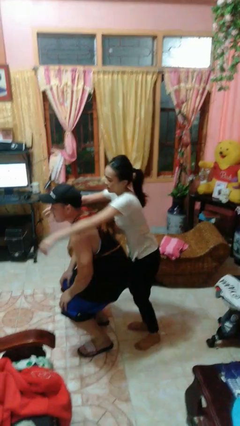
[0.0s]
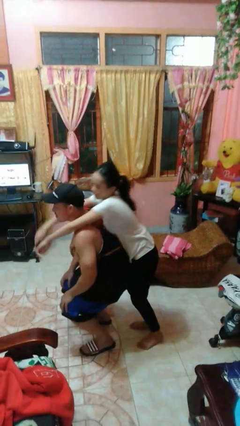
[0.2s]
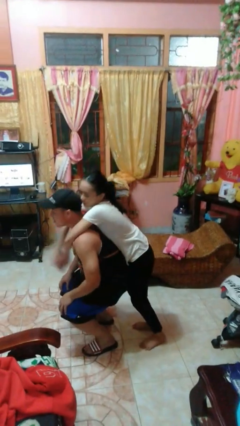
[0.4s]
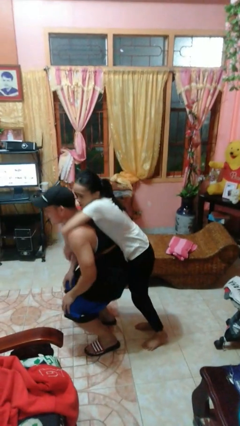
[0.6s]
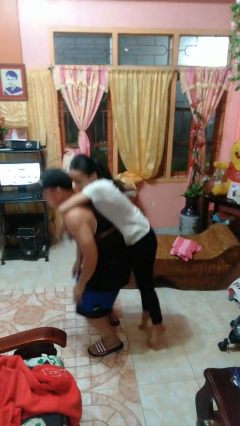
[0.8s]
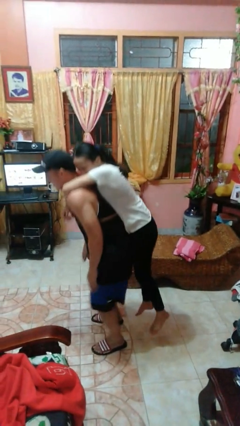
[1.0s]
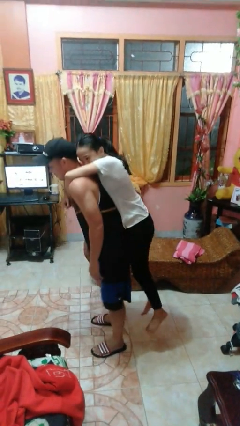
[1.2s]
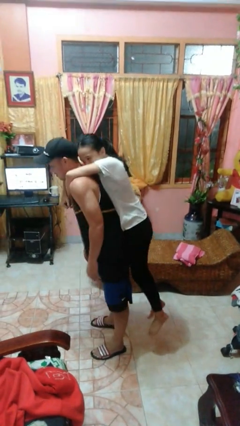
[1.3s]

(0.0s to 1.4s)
person picks up person

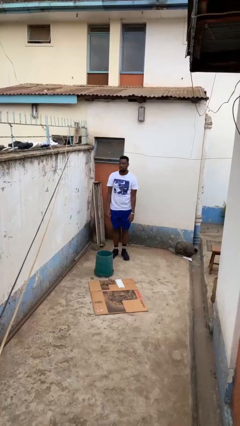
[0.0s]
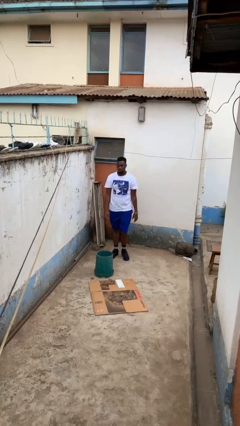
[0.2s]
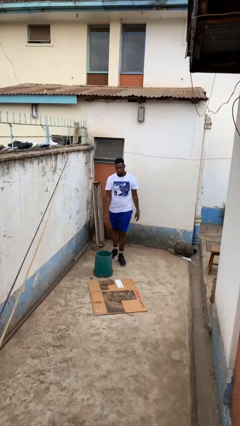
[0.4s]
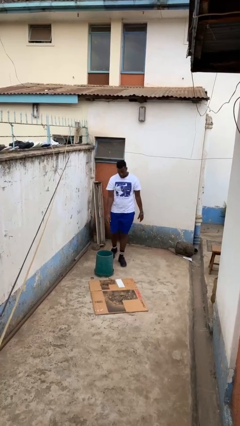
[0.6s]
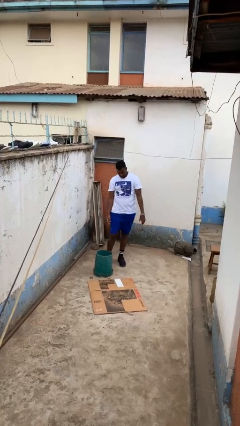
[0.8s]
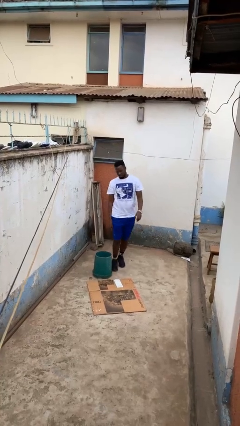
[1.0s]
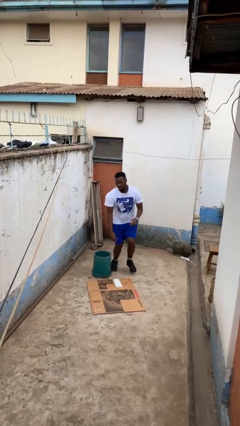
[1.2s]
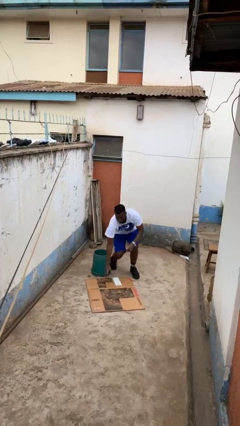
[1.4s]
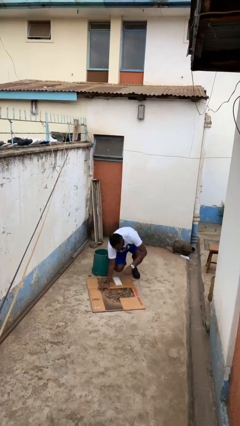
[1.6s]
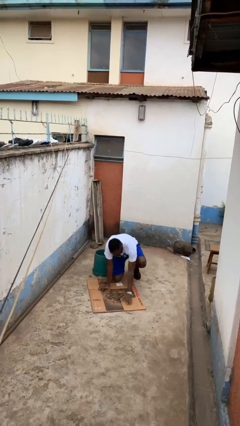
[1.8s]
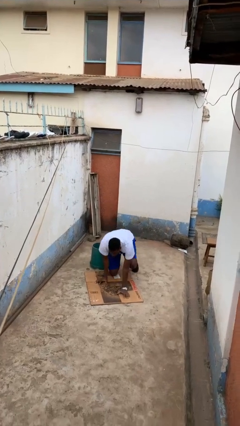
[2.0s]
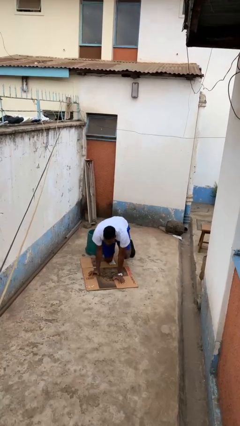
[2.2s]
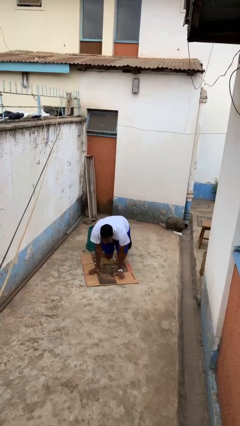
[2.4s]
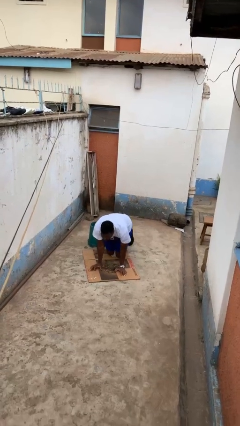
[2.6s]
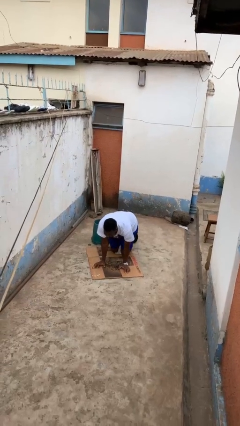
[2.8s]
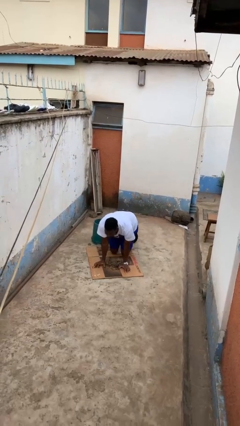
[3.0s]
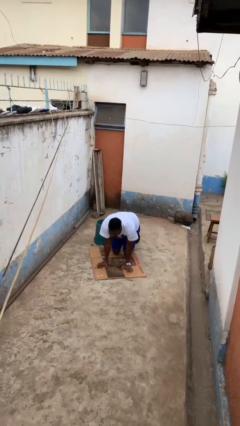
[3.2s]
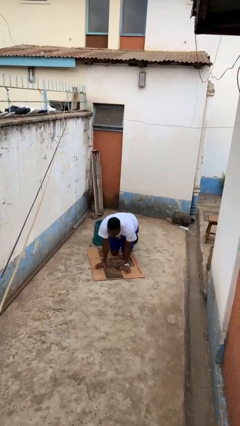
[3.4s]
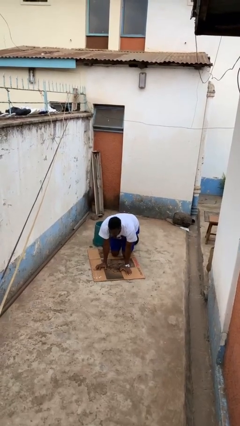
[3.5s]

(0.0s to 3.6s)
person trips on object on floor

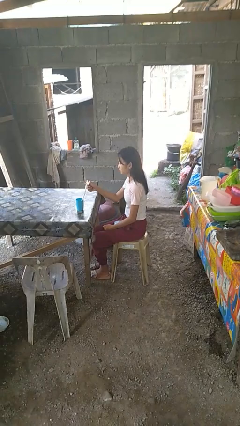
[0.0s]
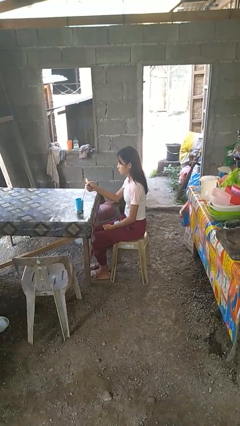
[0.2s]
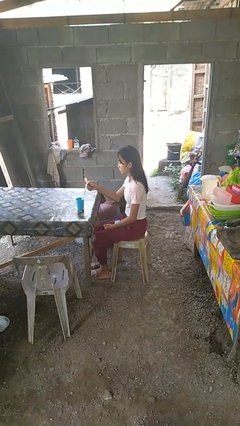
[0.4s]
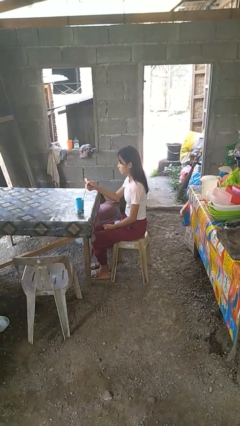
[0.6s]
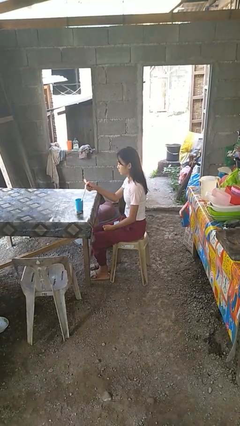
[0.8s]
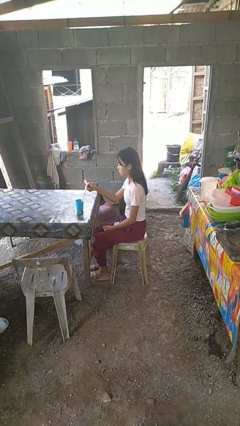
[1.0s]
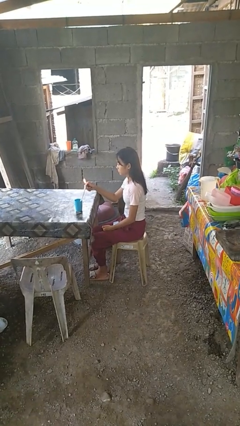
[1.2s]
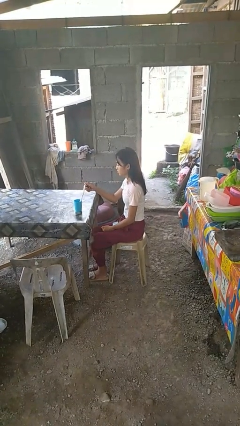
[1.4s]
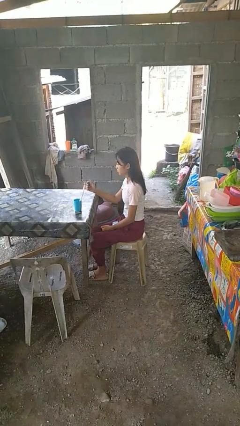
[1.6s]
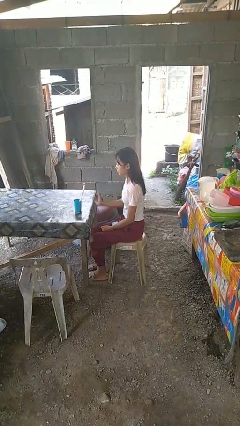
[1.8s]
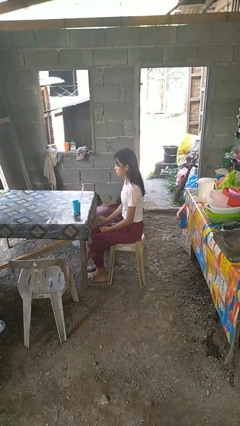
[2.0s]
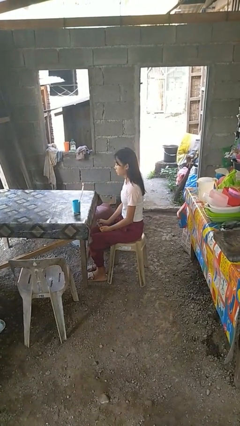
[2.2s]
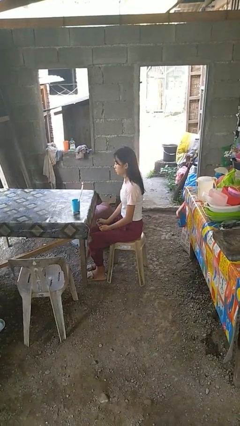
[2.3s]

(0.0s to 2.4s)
person lights candle

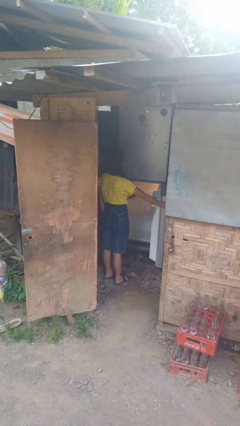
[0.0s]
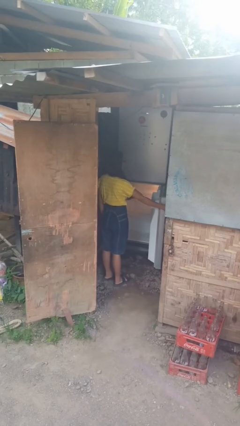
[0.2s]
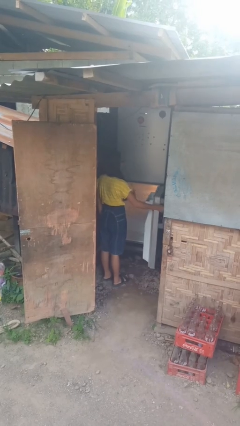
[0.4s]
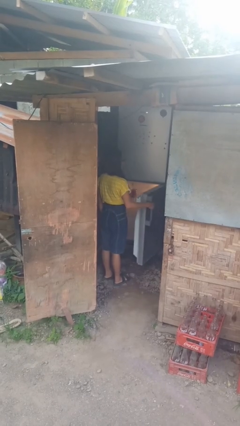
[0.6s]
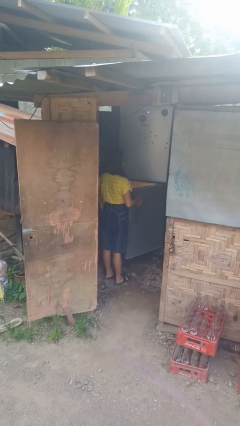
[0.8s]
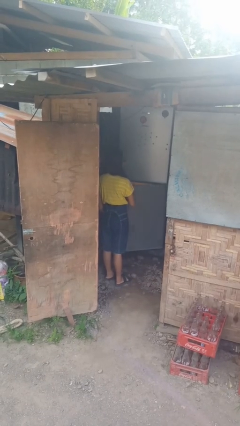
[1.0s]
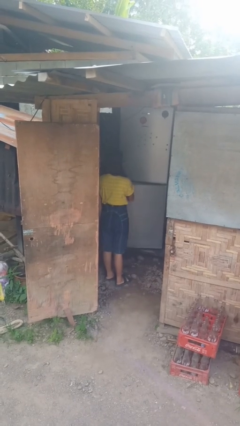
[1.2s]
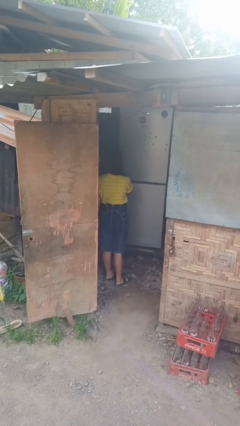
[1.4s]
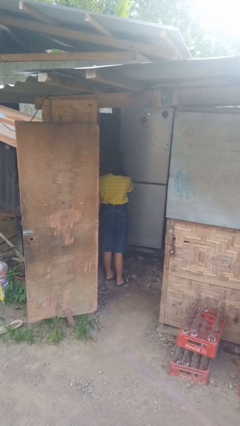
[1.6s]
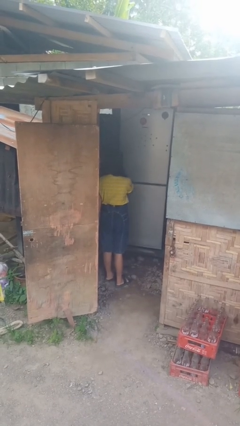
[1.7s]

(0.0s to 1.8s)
person closes refrigerator

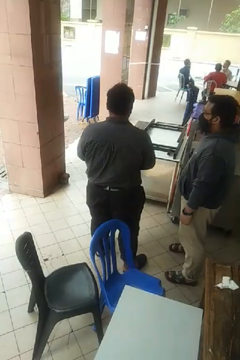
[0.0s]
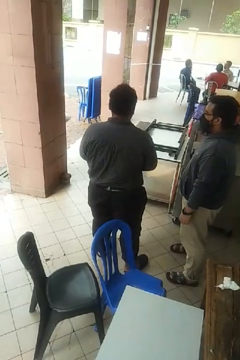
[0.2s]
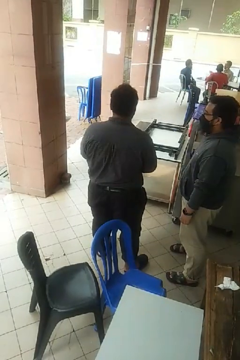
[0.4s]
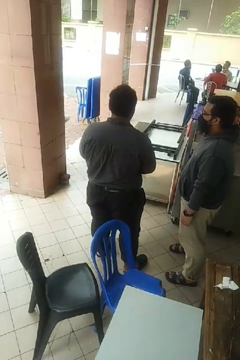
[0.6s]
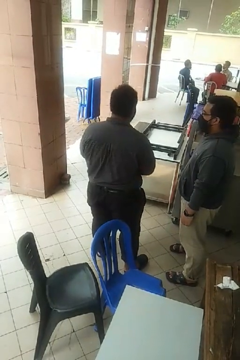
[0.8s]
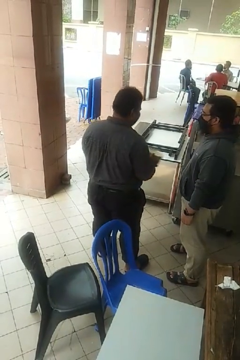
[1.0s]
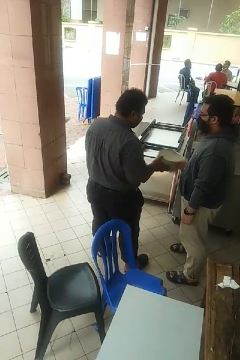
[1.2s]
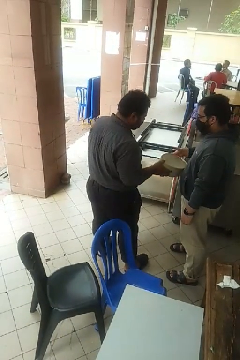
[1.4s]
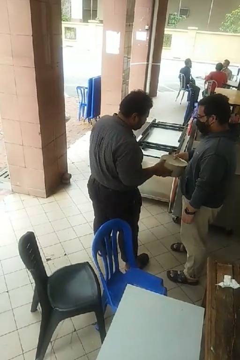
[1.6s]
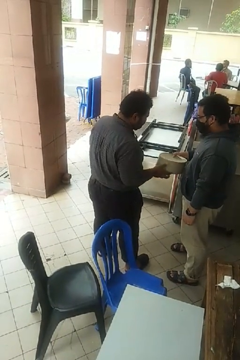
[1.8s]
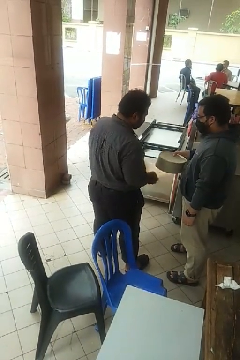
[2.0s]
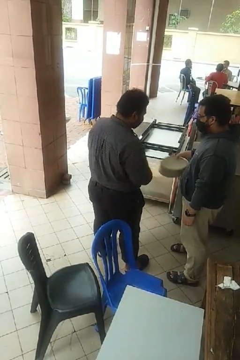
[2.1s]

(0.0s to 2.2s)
person transfers object to person

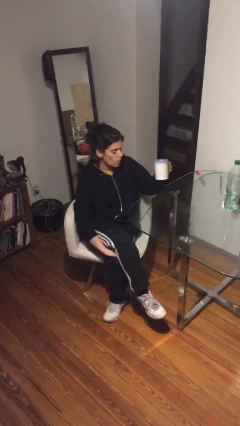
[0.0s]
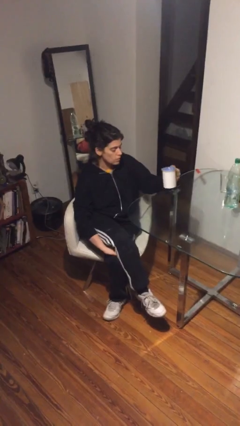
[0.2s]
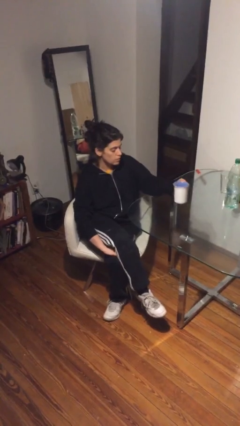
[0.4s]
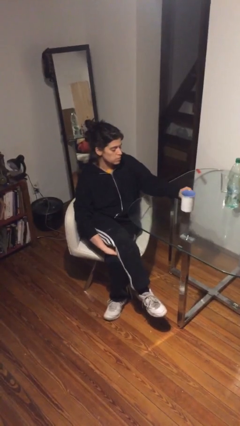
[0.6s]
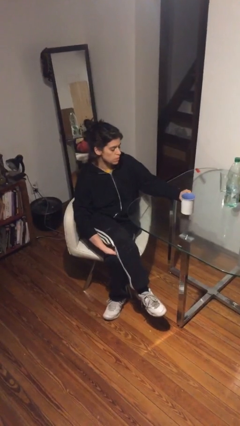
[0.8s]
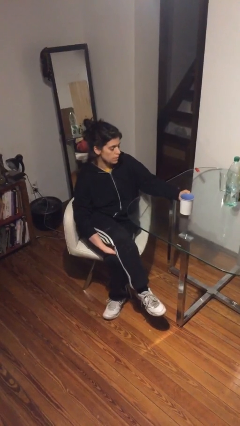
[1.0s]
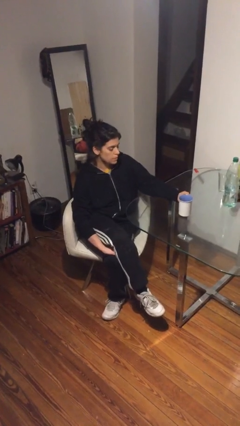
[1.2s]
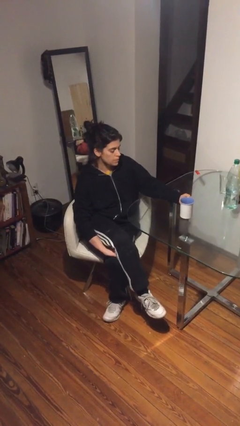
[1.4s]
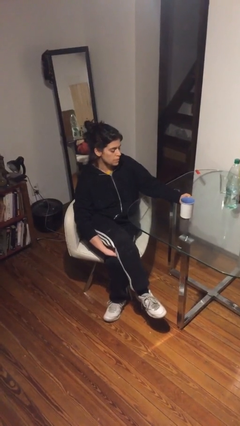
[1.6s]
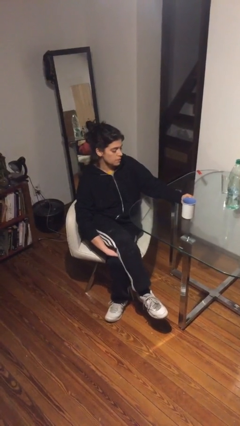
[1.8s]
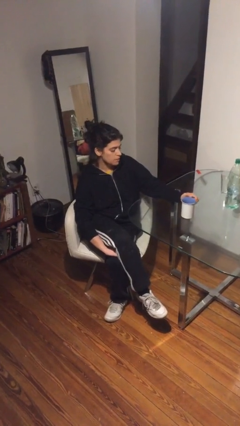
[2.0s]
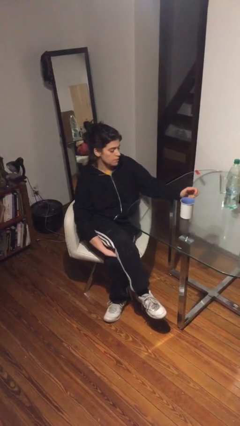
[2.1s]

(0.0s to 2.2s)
person puts down object on table

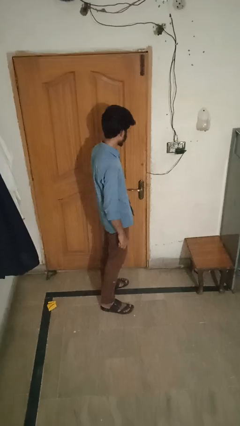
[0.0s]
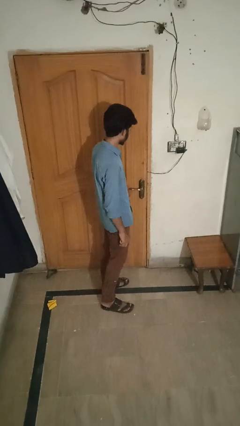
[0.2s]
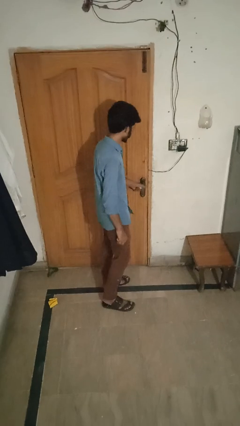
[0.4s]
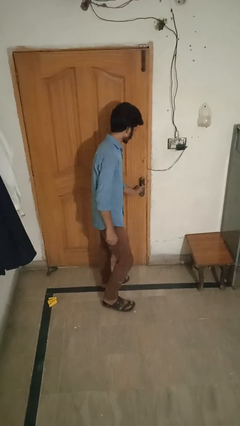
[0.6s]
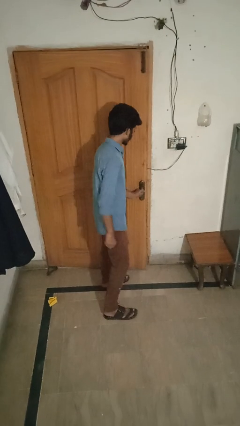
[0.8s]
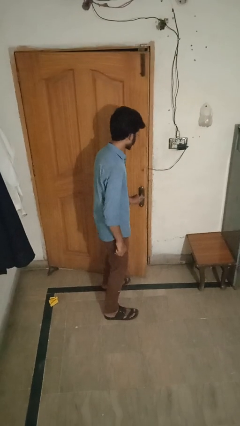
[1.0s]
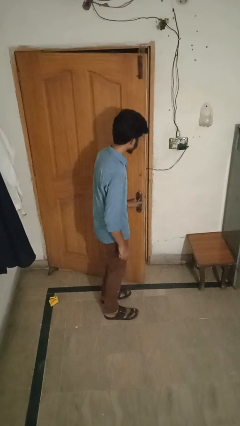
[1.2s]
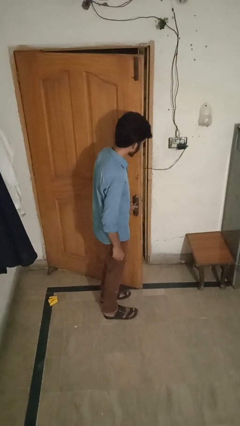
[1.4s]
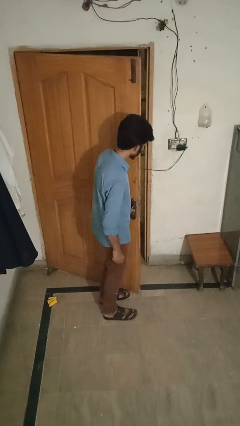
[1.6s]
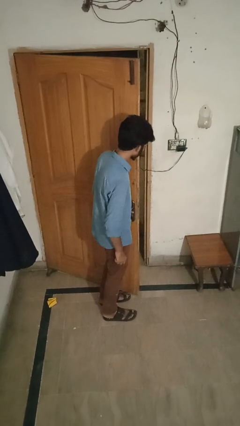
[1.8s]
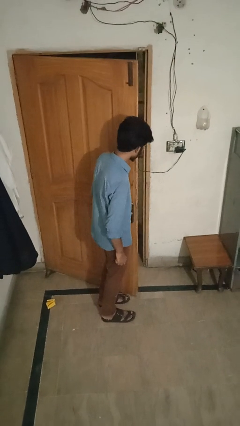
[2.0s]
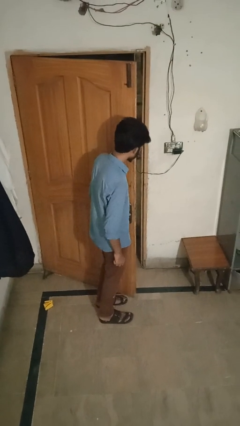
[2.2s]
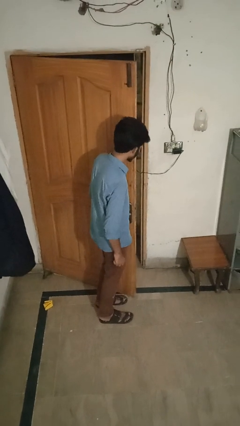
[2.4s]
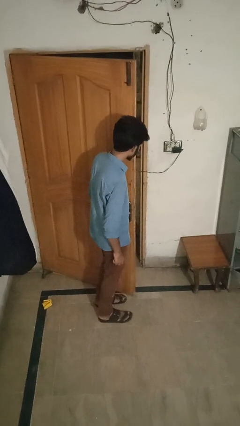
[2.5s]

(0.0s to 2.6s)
person opens facility door

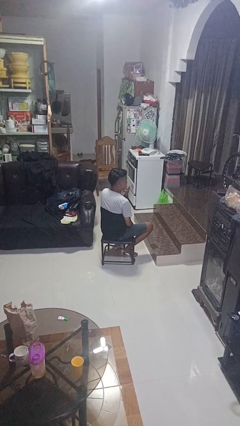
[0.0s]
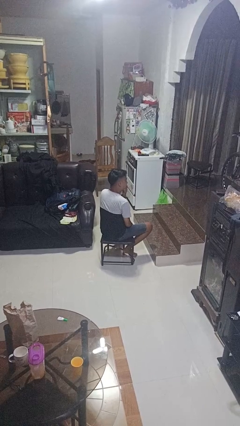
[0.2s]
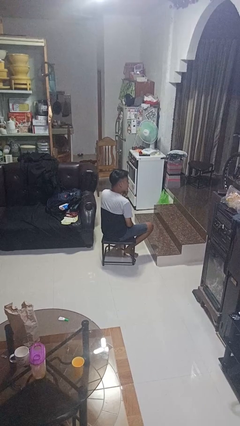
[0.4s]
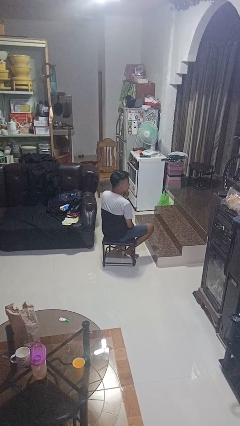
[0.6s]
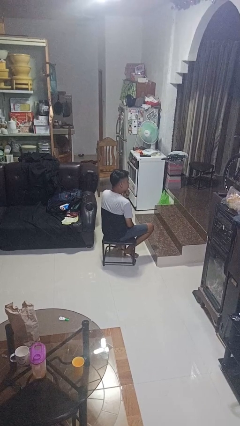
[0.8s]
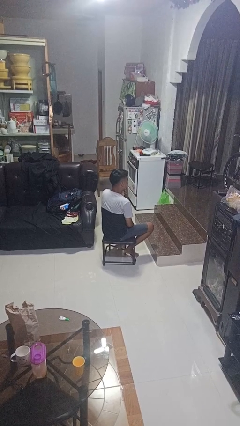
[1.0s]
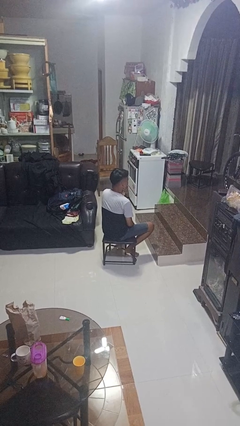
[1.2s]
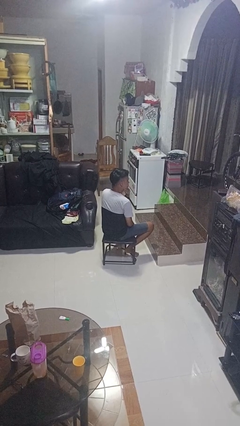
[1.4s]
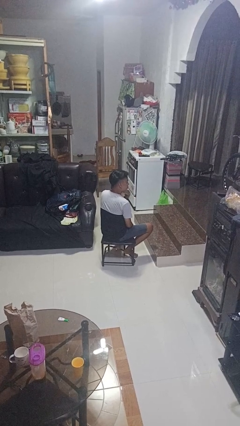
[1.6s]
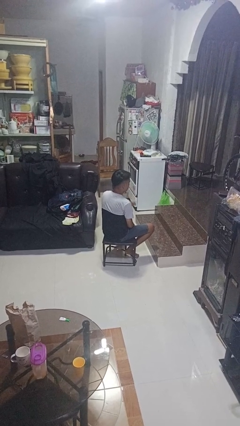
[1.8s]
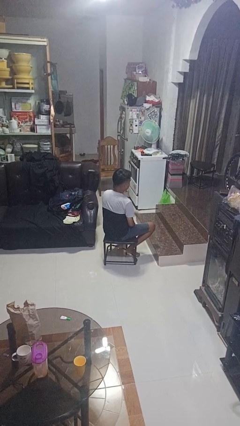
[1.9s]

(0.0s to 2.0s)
person strokes chin
